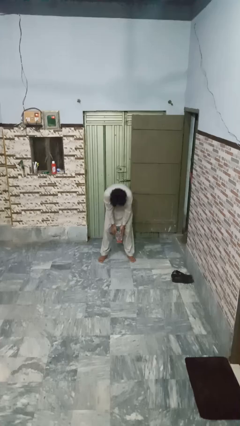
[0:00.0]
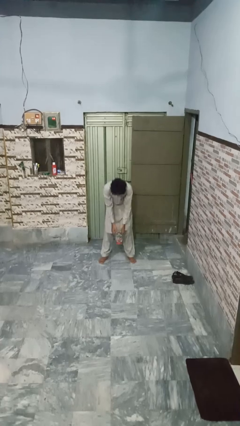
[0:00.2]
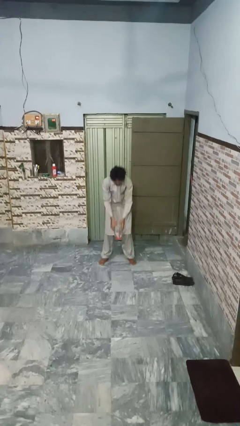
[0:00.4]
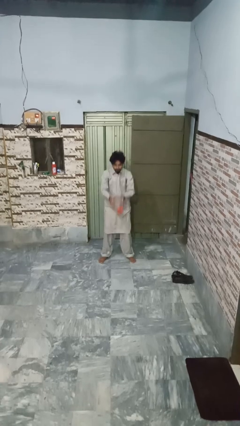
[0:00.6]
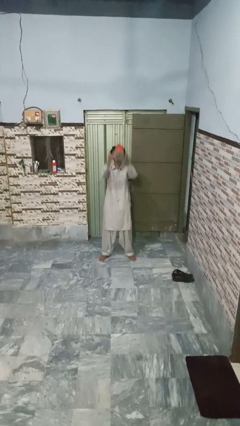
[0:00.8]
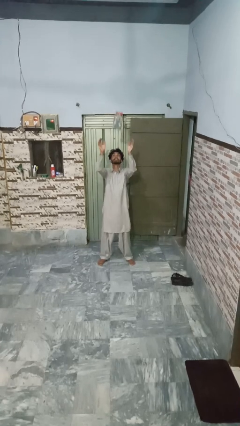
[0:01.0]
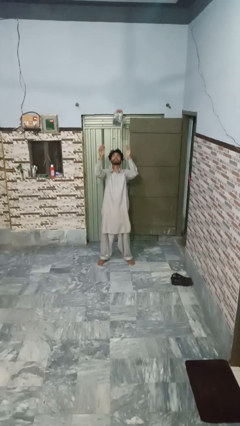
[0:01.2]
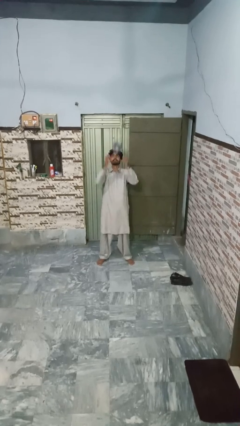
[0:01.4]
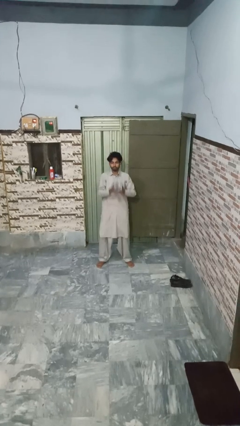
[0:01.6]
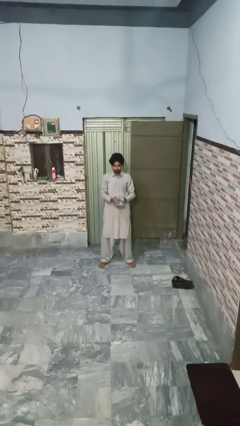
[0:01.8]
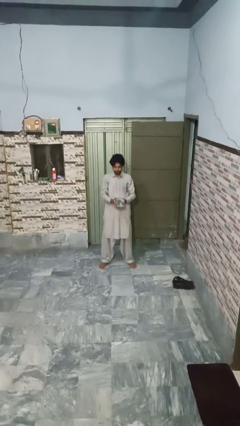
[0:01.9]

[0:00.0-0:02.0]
person picks up object from floor

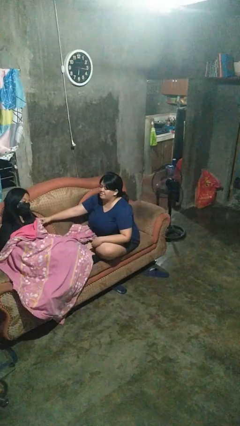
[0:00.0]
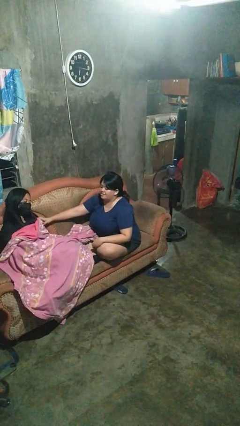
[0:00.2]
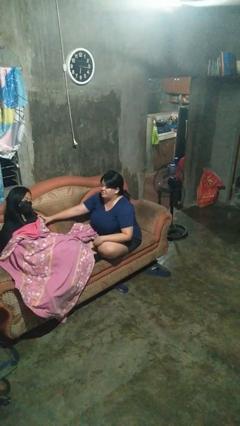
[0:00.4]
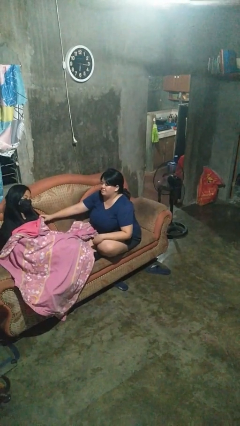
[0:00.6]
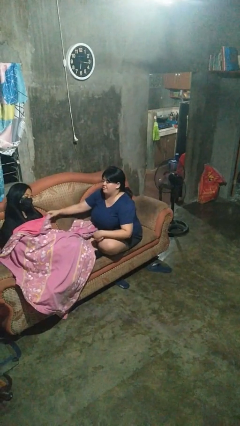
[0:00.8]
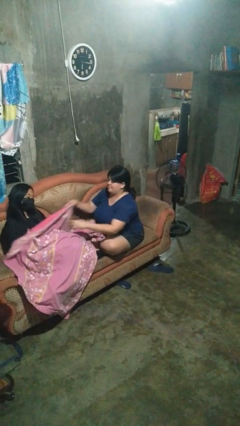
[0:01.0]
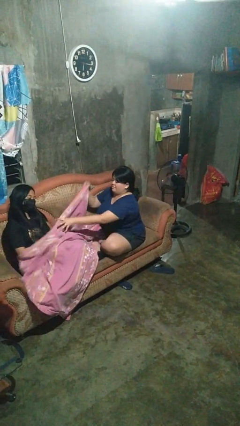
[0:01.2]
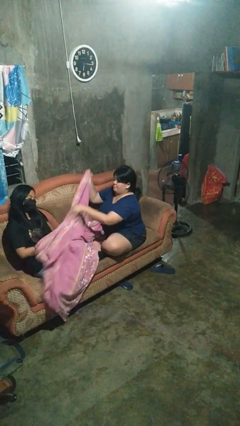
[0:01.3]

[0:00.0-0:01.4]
person uncovers friend with blanket

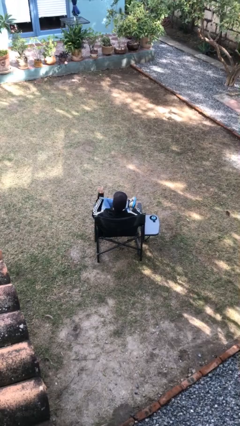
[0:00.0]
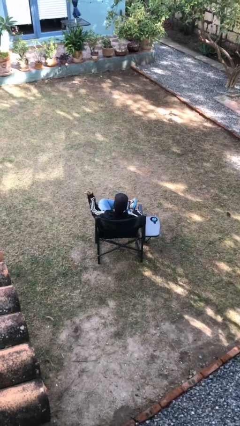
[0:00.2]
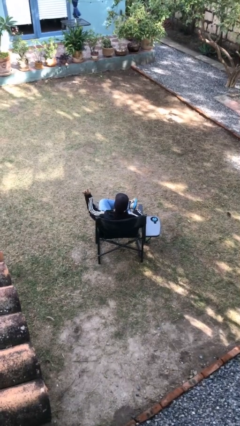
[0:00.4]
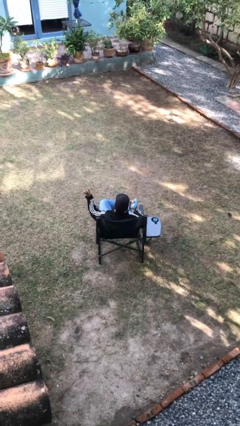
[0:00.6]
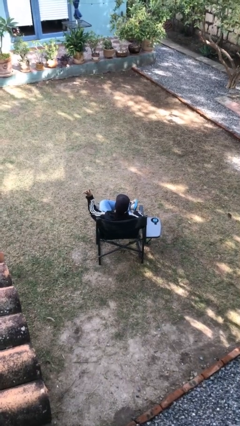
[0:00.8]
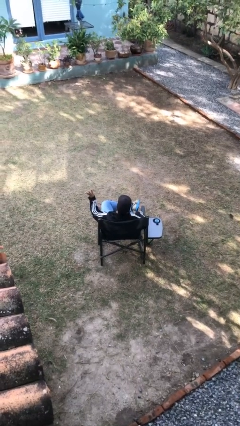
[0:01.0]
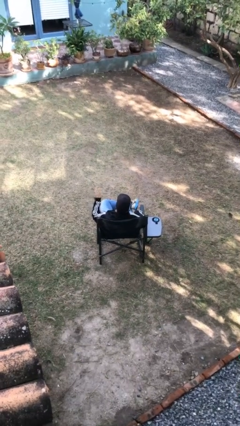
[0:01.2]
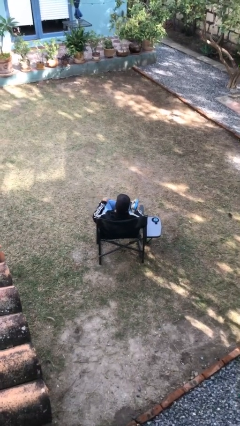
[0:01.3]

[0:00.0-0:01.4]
person gestures number four

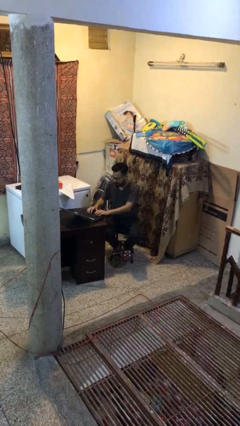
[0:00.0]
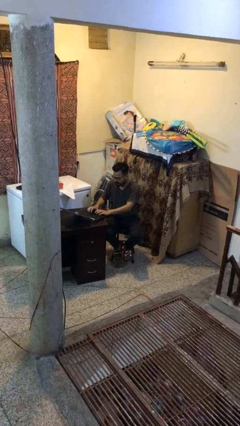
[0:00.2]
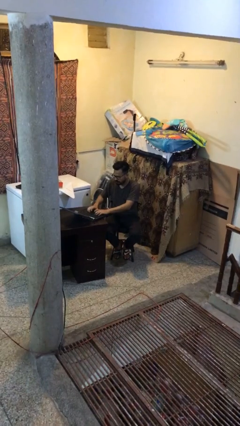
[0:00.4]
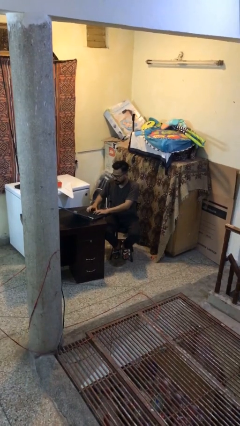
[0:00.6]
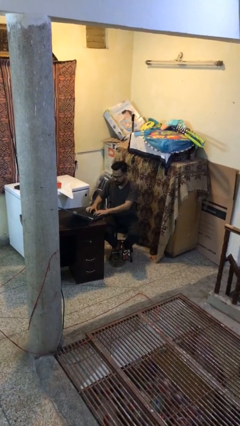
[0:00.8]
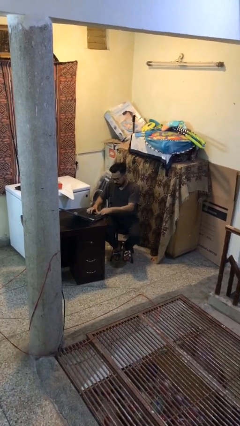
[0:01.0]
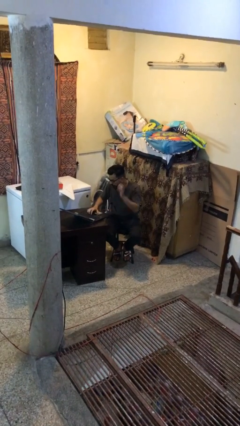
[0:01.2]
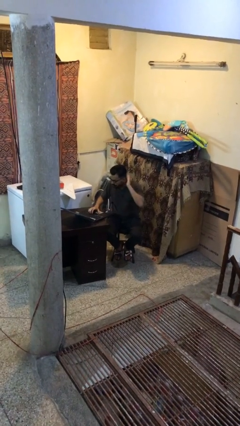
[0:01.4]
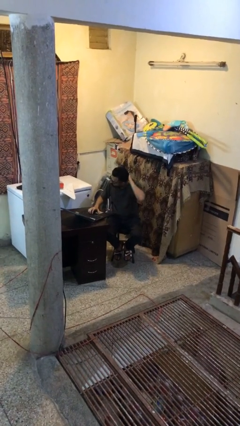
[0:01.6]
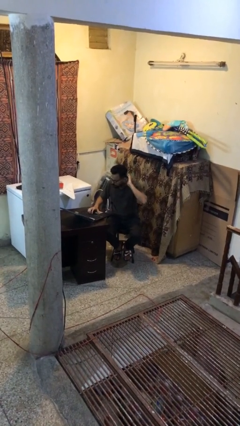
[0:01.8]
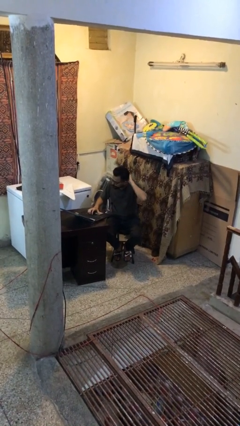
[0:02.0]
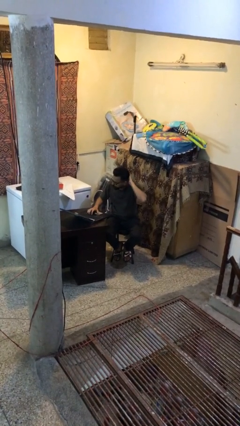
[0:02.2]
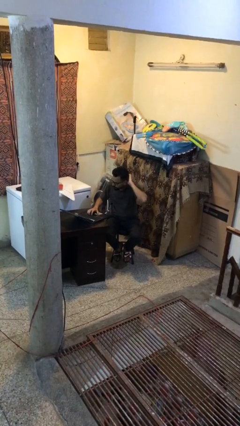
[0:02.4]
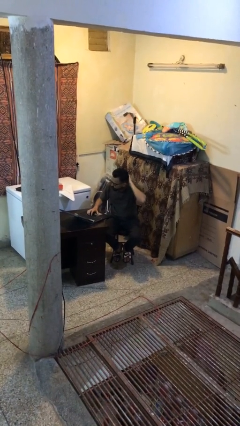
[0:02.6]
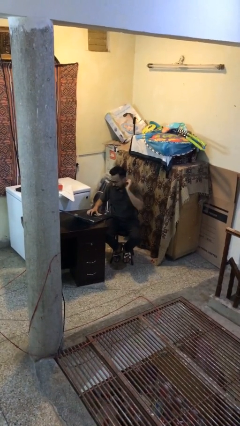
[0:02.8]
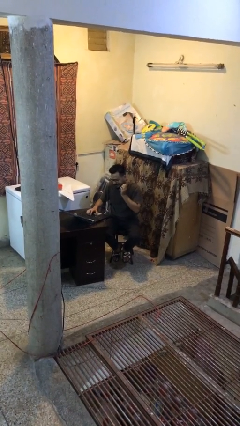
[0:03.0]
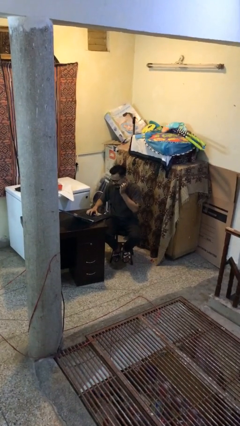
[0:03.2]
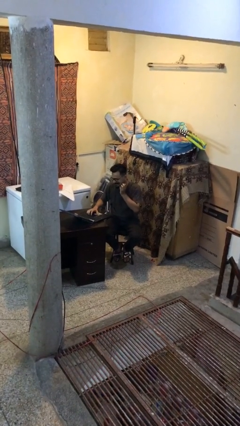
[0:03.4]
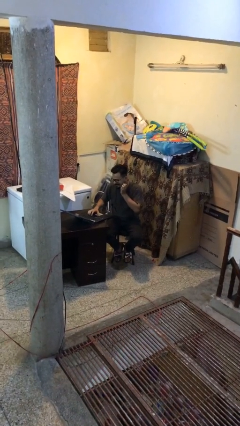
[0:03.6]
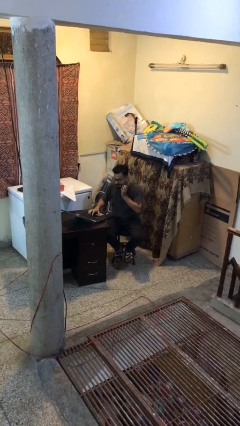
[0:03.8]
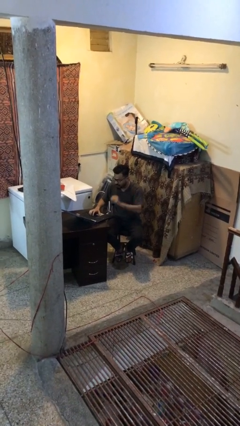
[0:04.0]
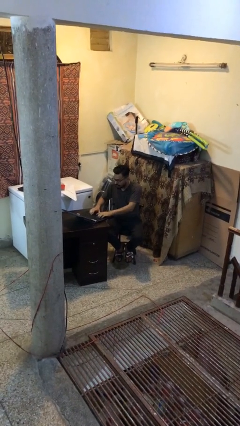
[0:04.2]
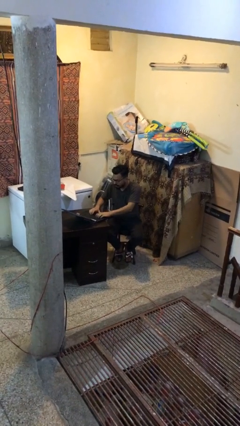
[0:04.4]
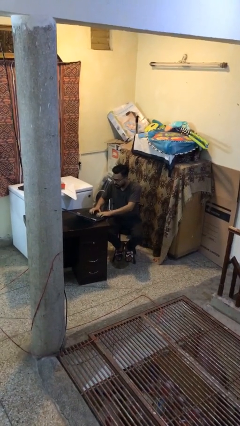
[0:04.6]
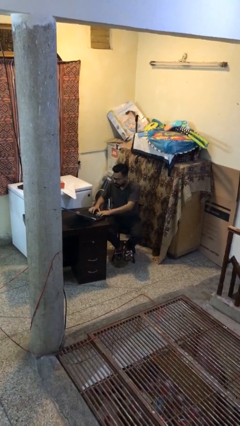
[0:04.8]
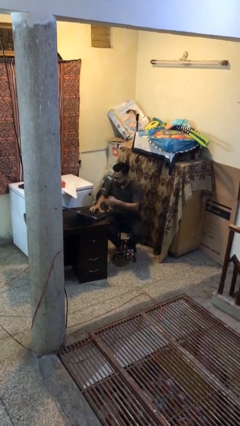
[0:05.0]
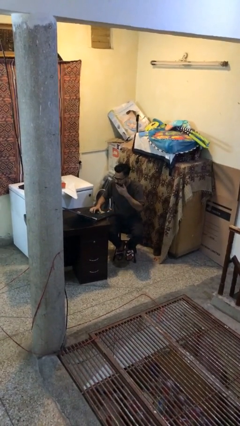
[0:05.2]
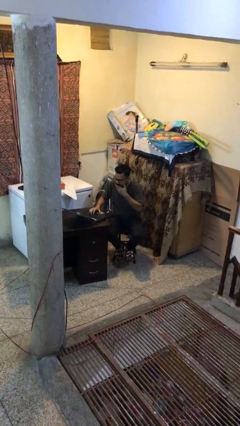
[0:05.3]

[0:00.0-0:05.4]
person interacts with laptop

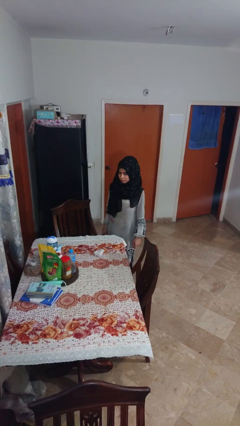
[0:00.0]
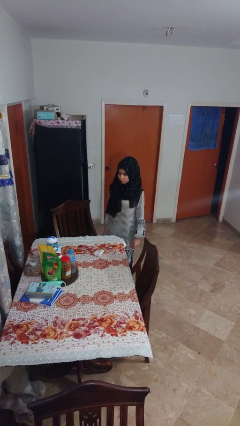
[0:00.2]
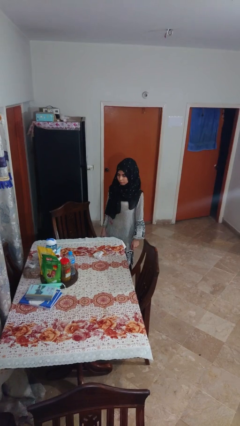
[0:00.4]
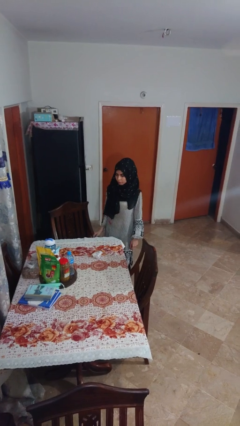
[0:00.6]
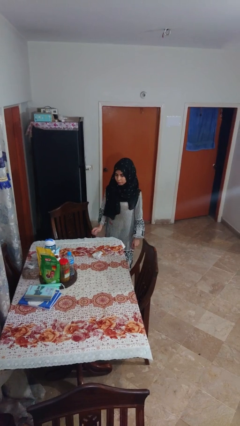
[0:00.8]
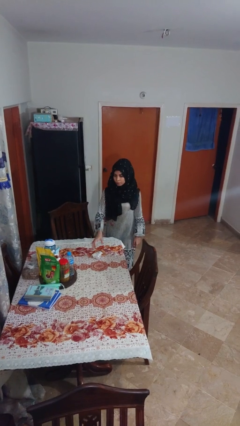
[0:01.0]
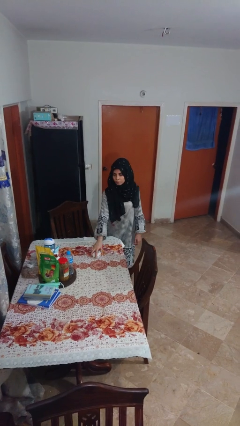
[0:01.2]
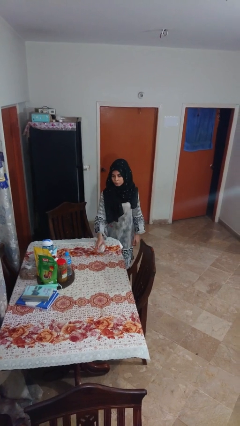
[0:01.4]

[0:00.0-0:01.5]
person picks up object from table

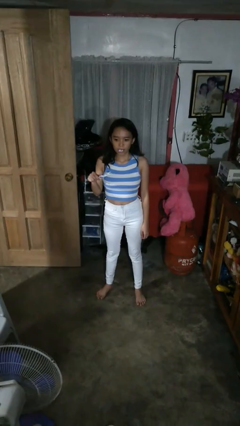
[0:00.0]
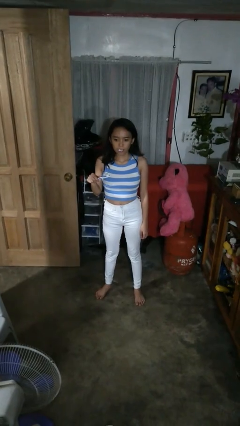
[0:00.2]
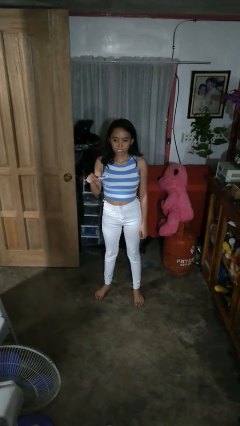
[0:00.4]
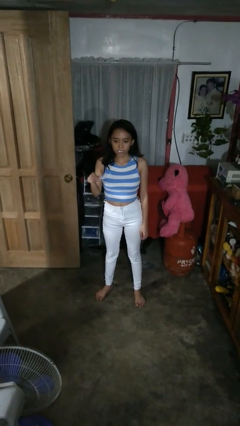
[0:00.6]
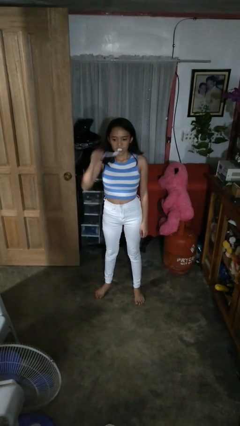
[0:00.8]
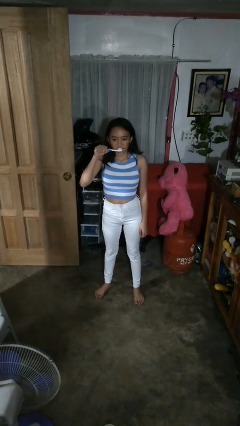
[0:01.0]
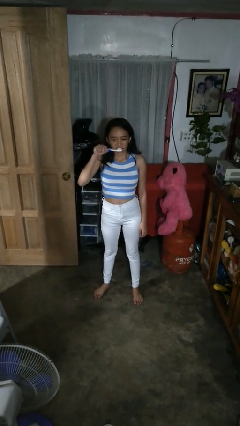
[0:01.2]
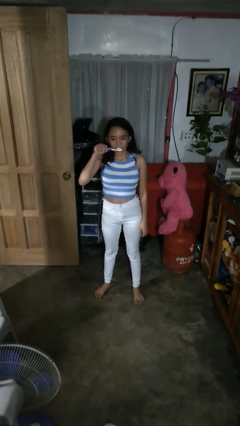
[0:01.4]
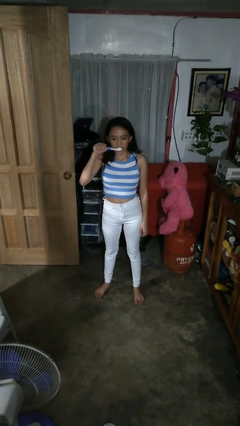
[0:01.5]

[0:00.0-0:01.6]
person brushes teeth

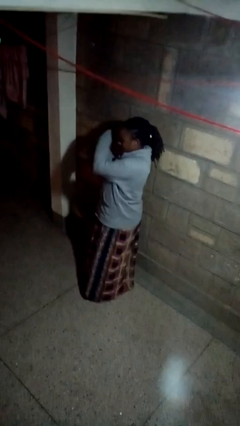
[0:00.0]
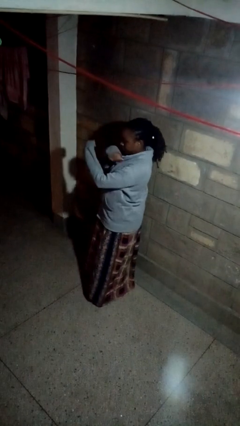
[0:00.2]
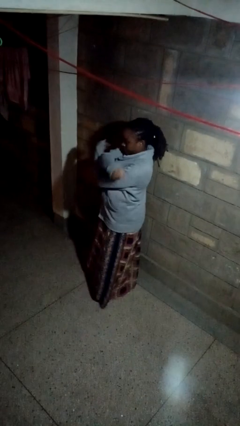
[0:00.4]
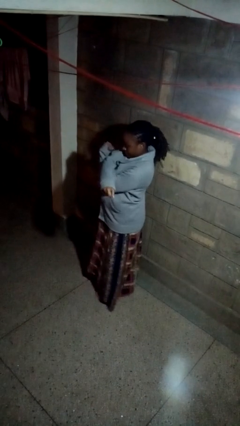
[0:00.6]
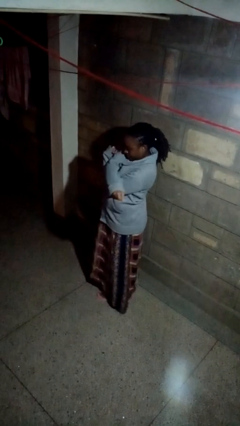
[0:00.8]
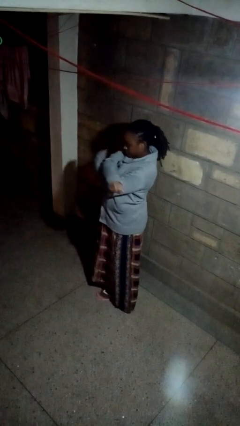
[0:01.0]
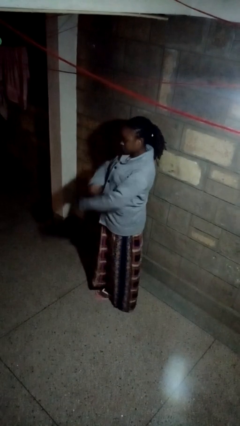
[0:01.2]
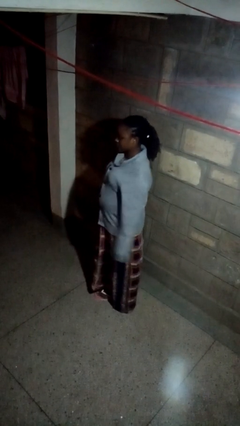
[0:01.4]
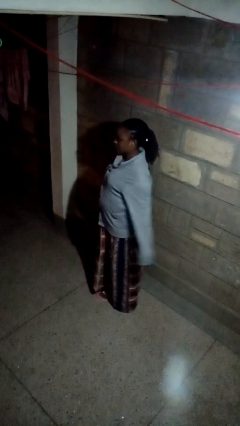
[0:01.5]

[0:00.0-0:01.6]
person stretches arms to side

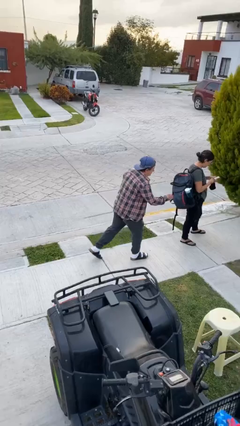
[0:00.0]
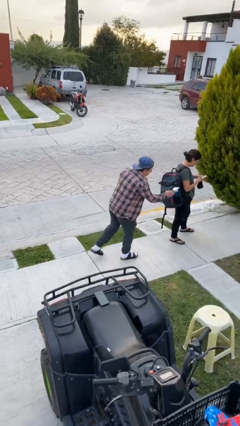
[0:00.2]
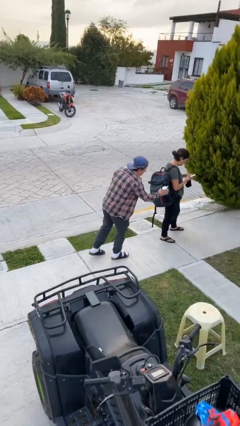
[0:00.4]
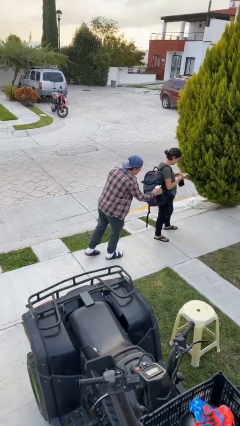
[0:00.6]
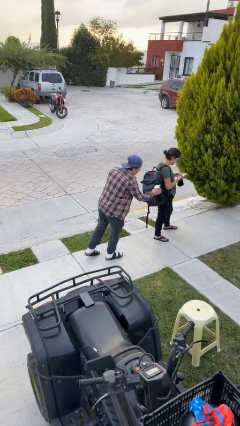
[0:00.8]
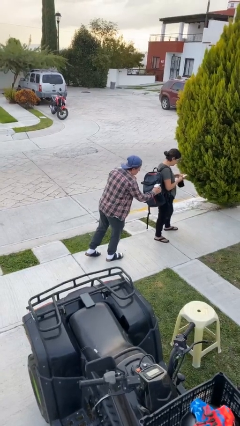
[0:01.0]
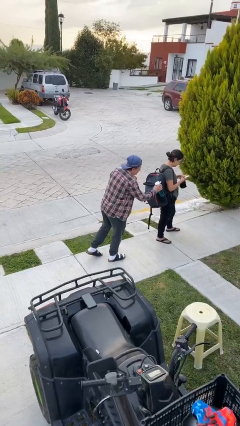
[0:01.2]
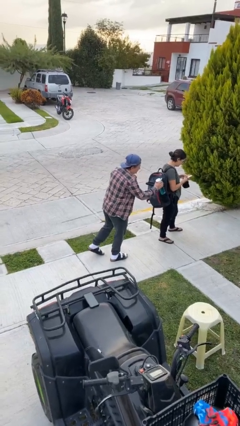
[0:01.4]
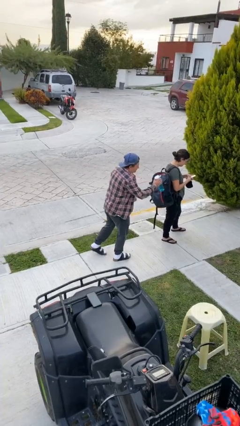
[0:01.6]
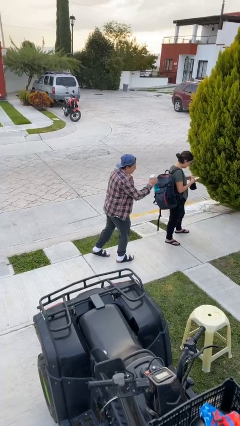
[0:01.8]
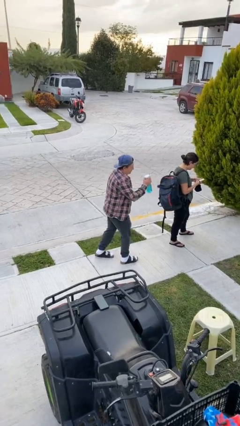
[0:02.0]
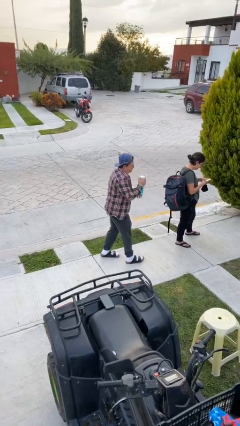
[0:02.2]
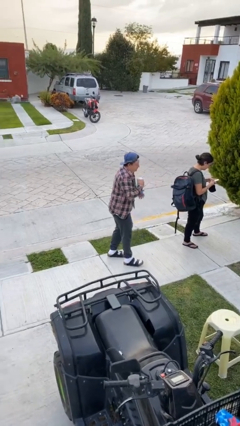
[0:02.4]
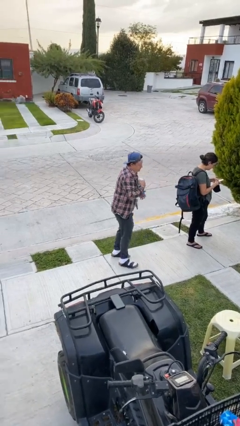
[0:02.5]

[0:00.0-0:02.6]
person steals object from person
